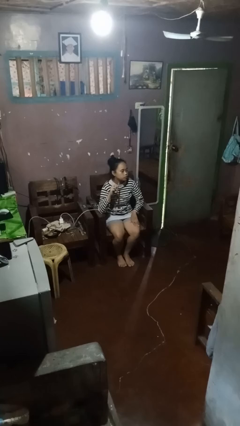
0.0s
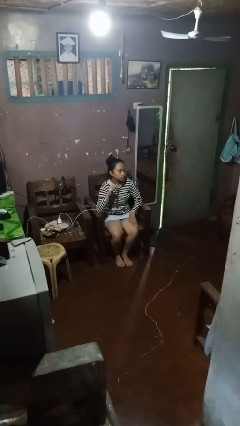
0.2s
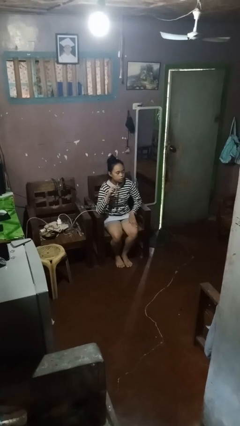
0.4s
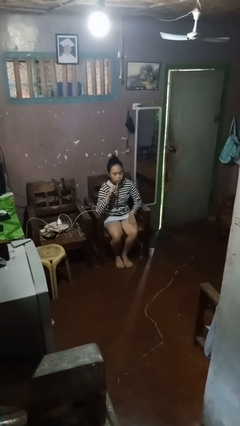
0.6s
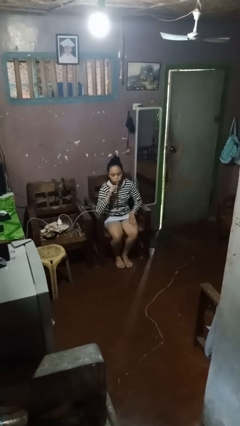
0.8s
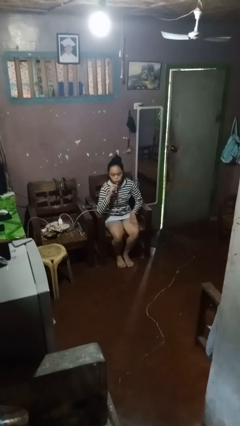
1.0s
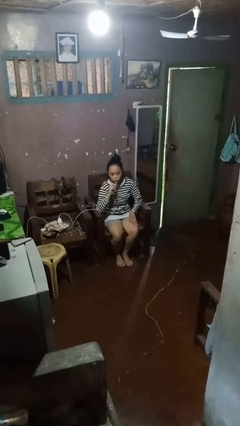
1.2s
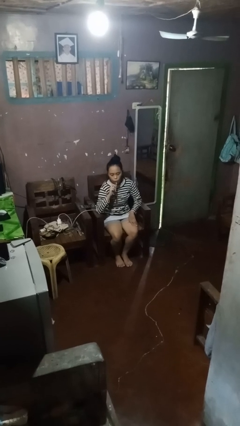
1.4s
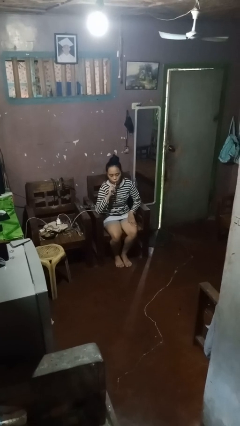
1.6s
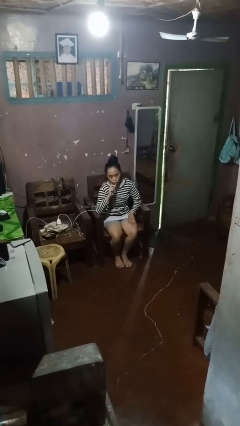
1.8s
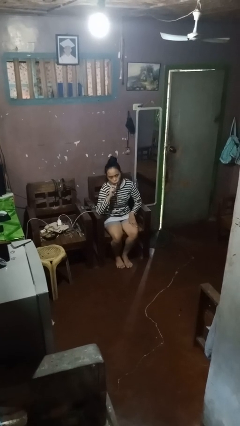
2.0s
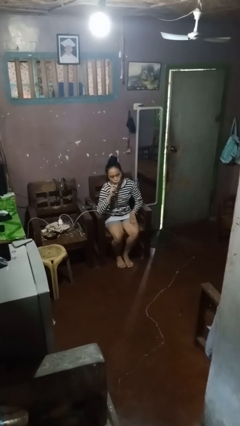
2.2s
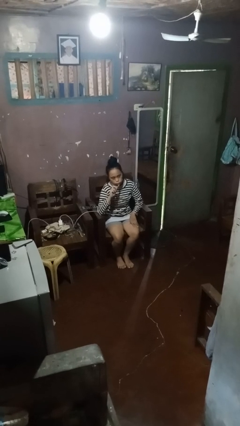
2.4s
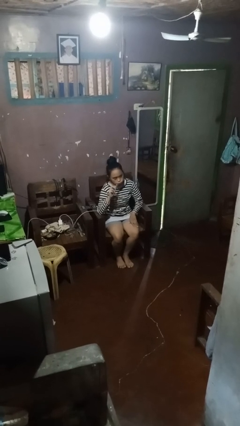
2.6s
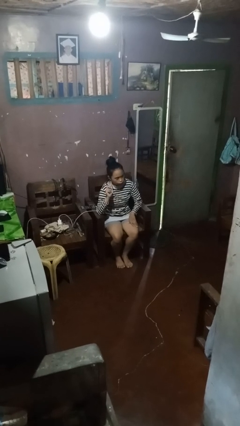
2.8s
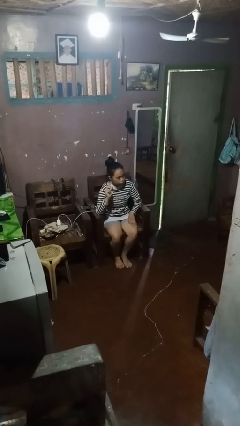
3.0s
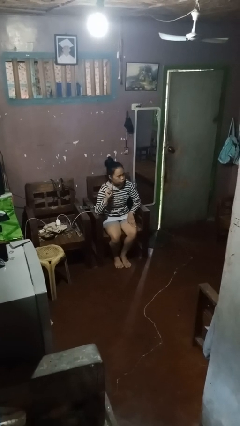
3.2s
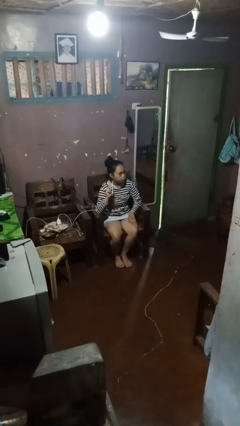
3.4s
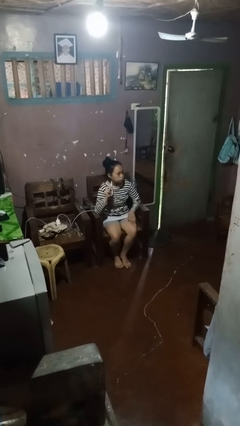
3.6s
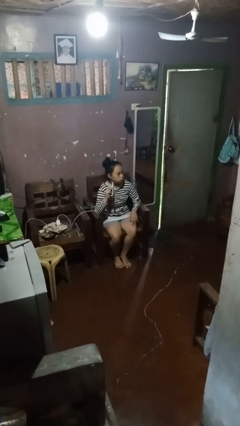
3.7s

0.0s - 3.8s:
person vapes

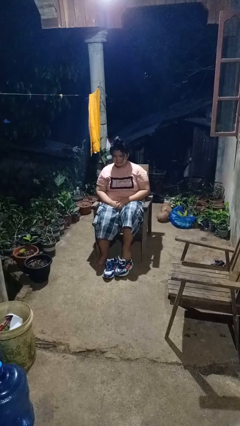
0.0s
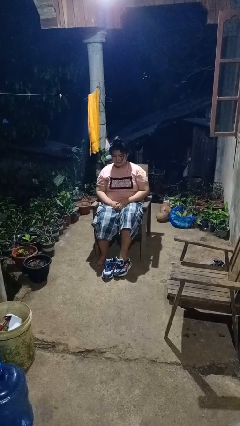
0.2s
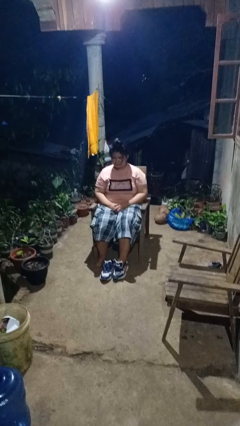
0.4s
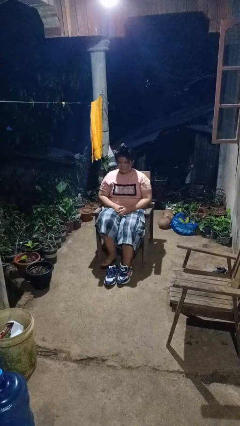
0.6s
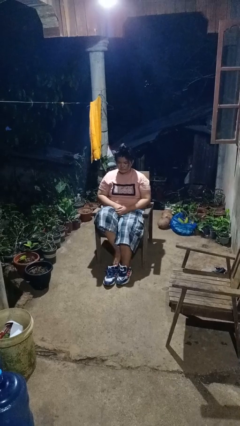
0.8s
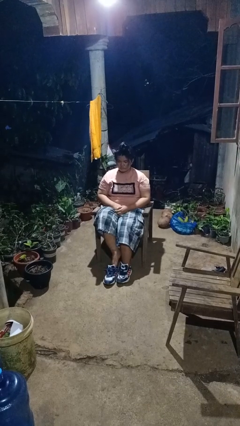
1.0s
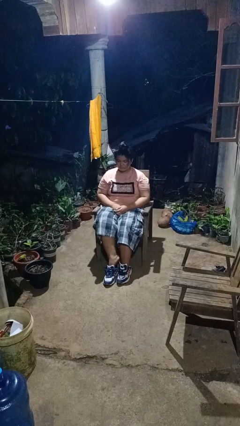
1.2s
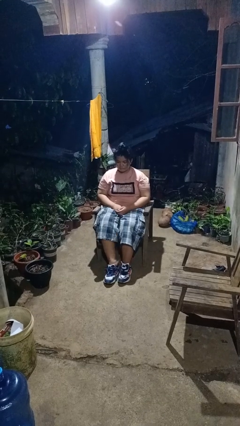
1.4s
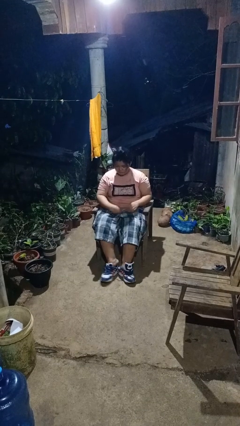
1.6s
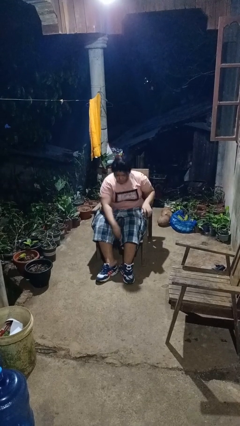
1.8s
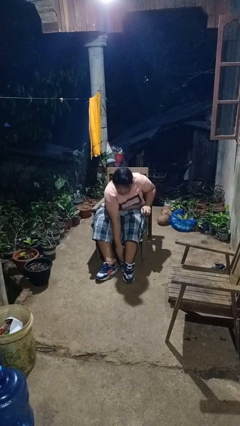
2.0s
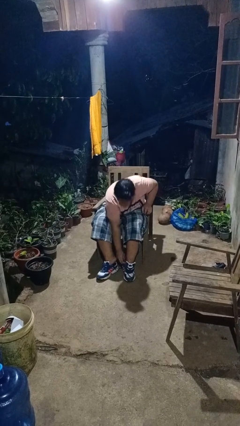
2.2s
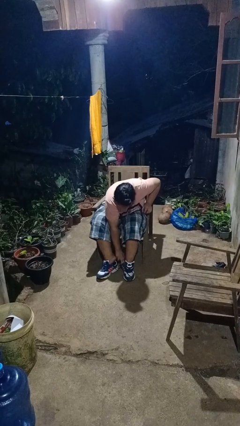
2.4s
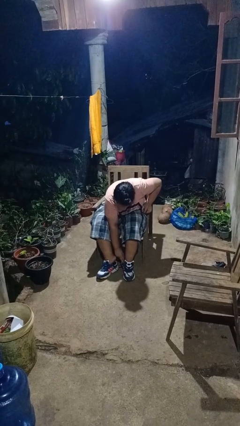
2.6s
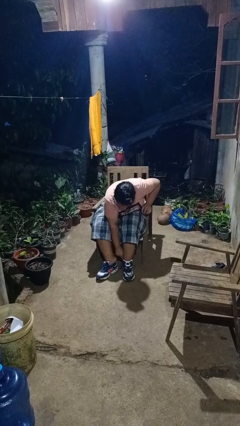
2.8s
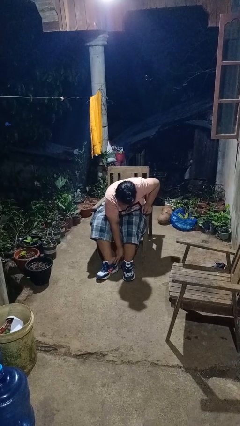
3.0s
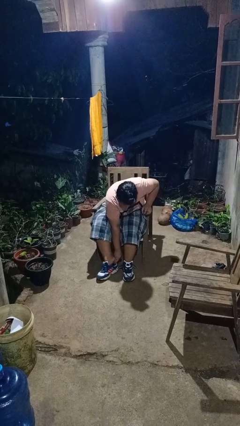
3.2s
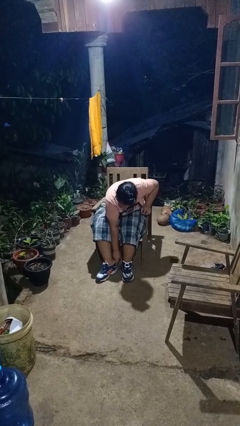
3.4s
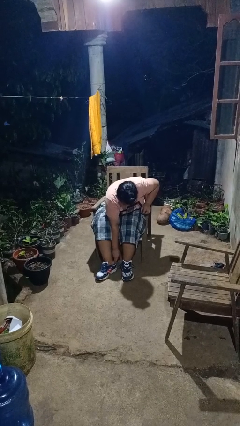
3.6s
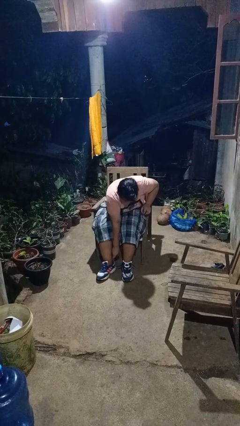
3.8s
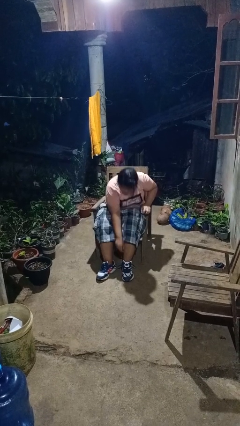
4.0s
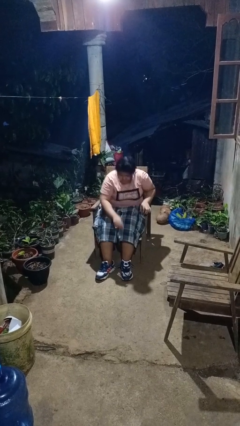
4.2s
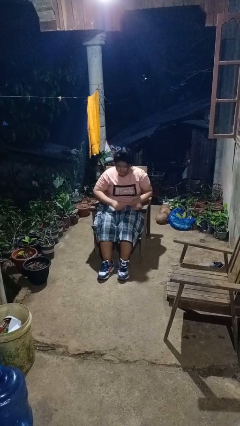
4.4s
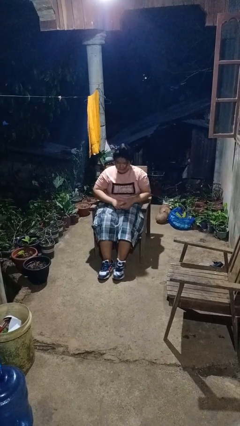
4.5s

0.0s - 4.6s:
person puts on shoes

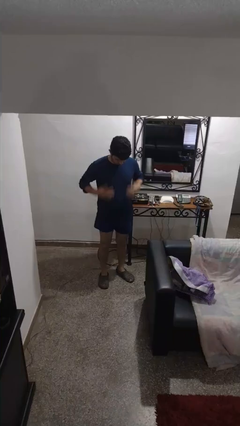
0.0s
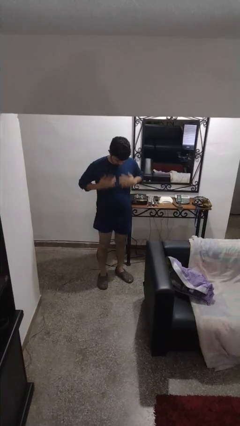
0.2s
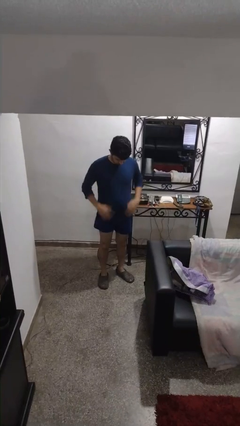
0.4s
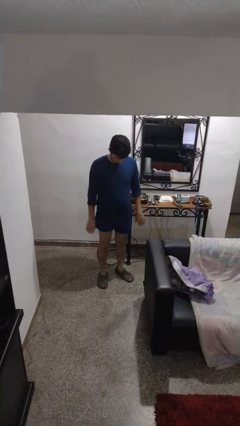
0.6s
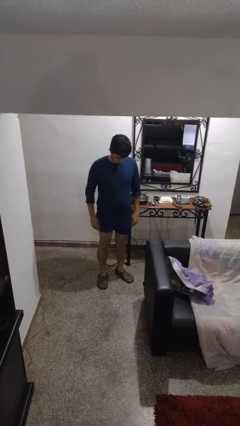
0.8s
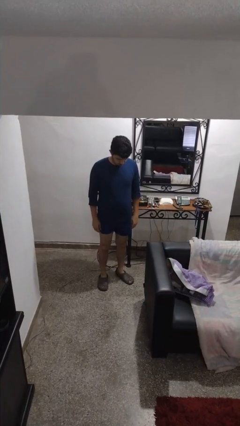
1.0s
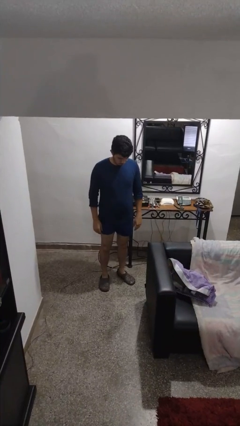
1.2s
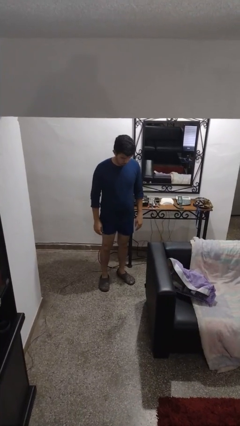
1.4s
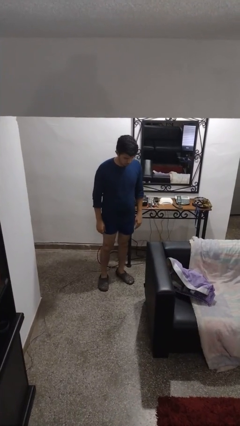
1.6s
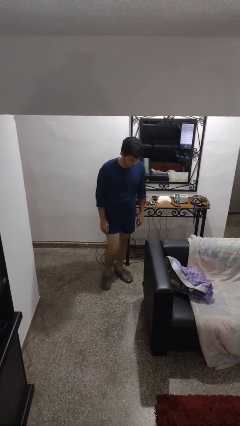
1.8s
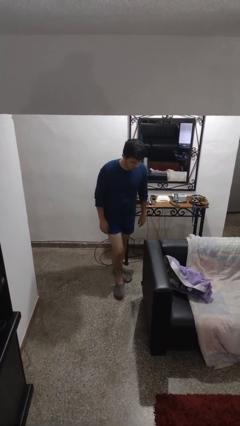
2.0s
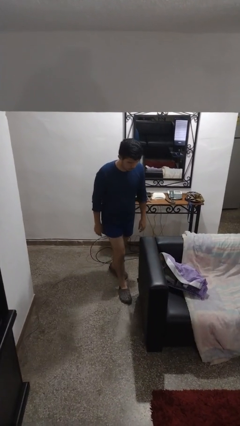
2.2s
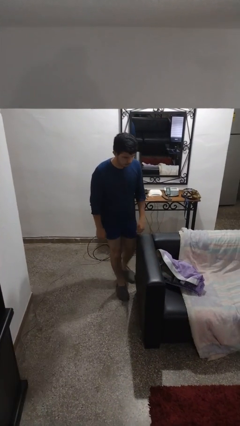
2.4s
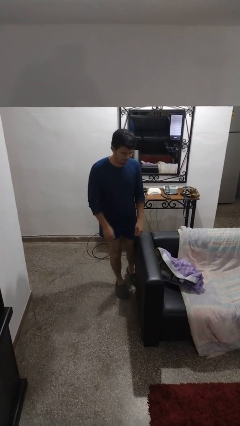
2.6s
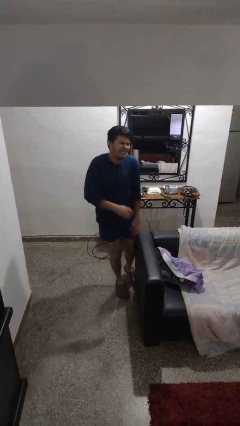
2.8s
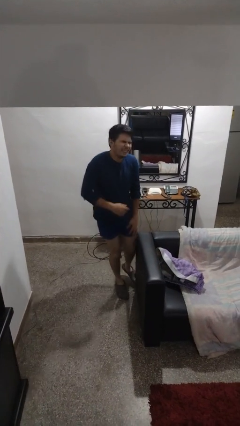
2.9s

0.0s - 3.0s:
person trips on object on floor

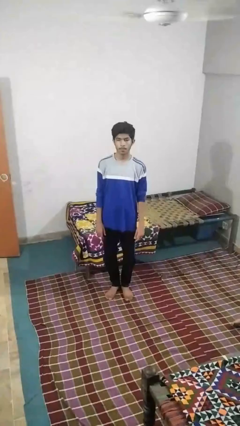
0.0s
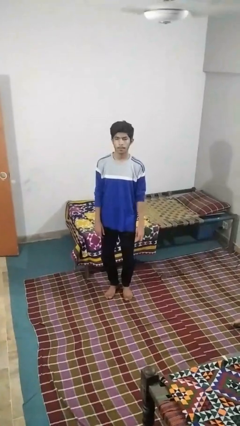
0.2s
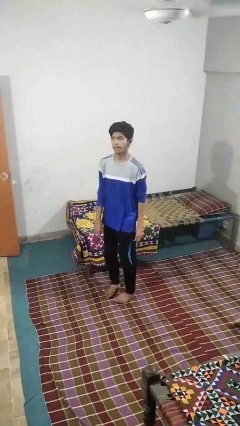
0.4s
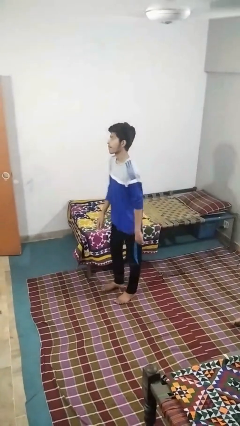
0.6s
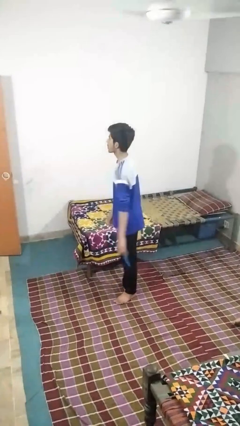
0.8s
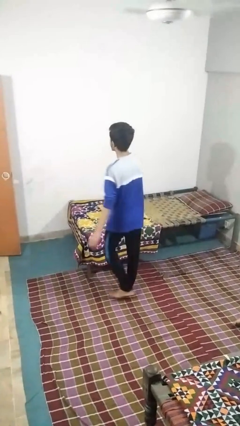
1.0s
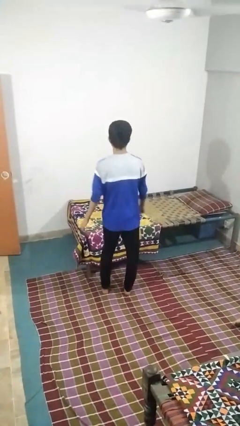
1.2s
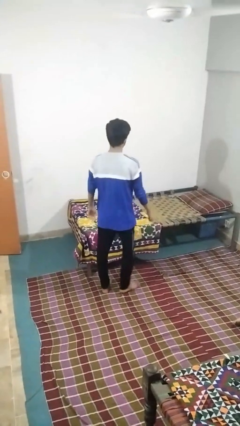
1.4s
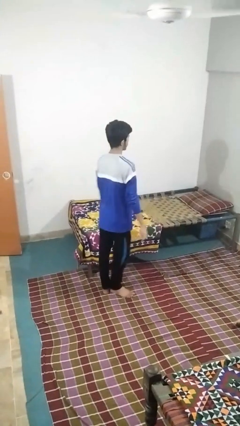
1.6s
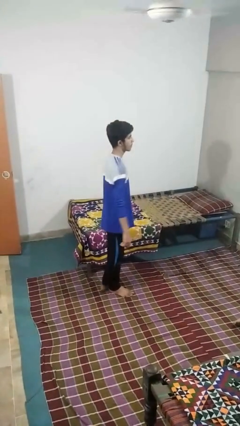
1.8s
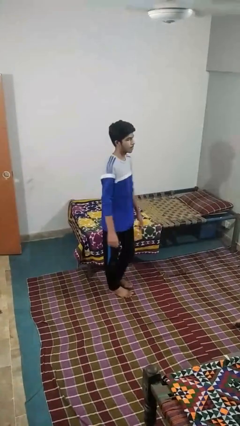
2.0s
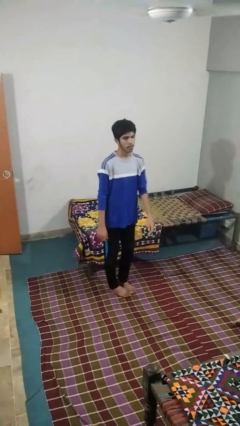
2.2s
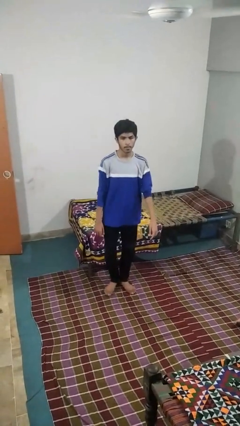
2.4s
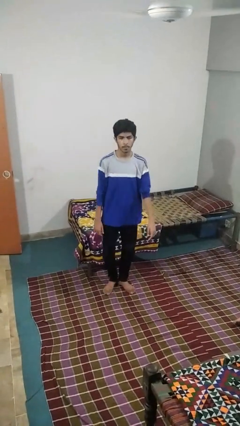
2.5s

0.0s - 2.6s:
person twirls

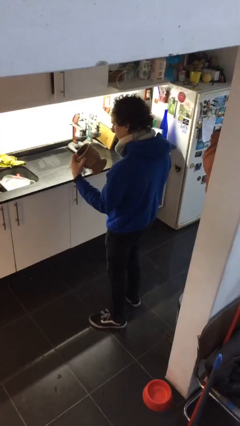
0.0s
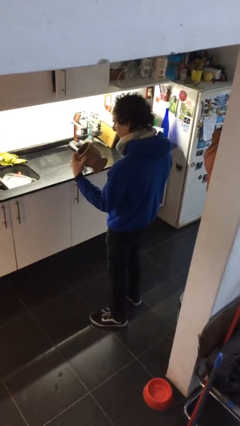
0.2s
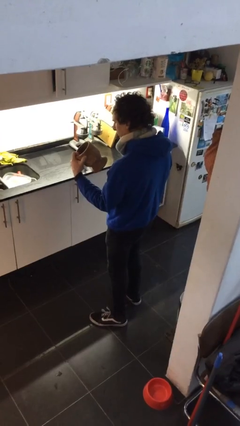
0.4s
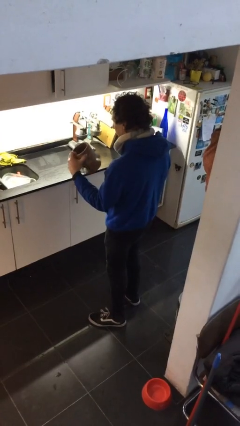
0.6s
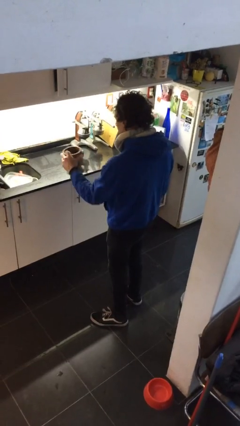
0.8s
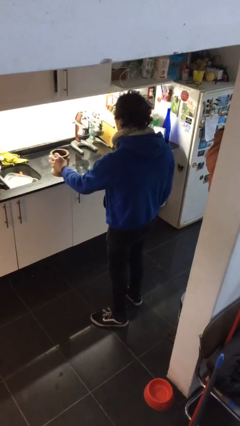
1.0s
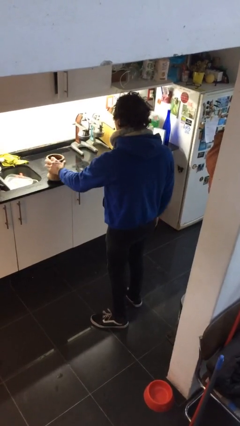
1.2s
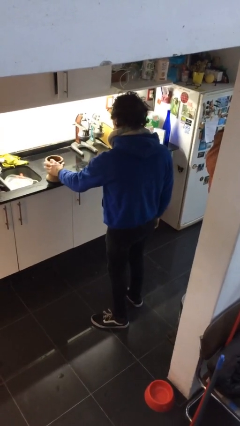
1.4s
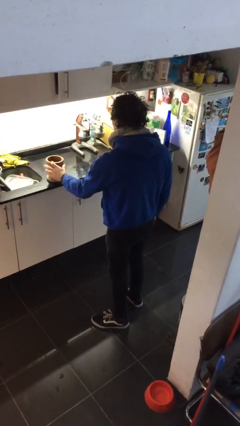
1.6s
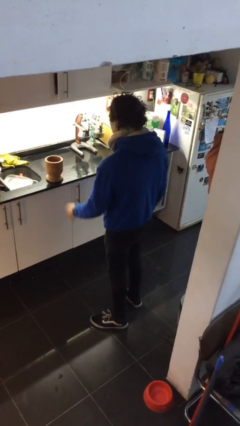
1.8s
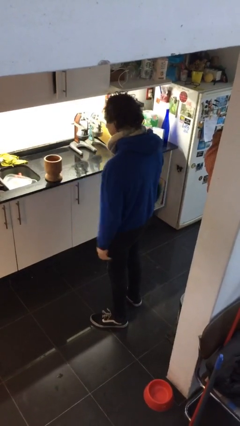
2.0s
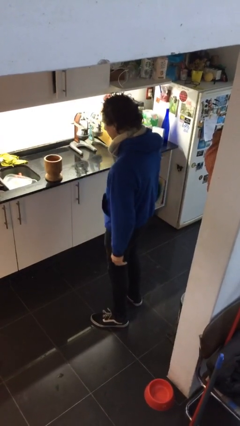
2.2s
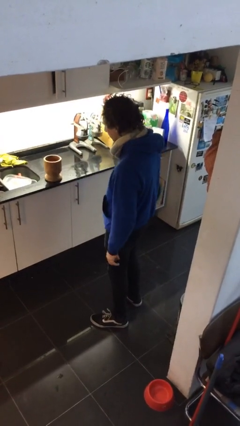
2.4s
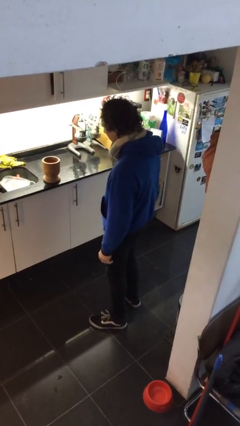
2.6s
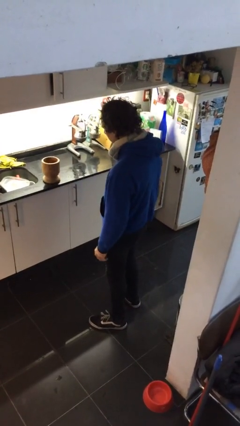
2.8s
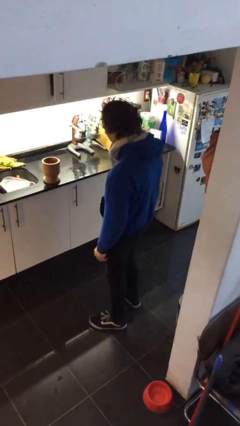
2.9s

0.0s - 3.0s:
person puts down object on countertop

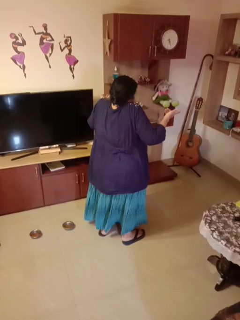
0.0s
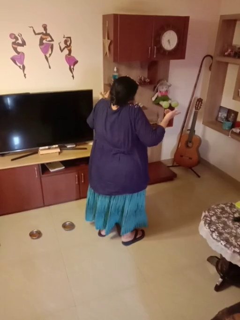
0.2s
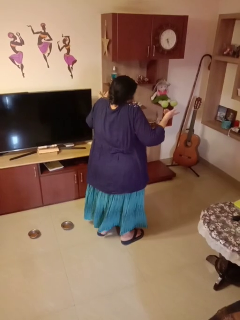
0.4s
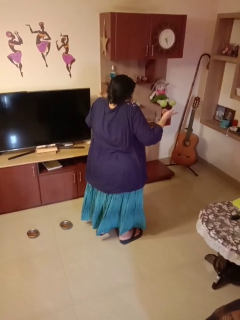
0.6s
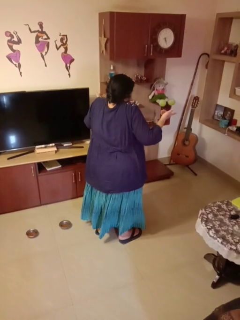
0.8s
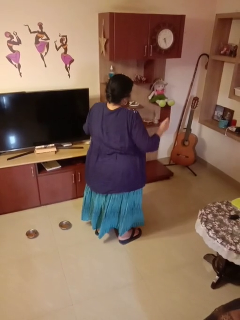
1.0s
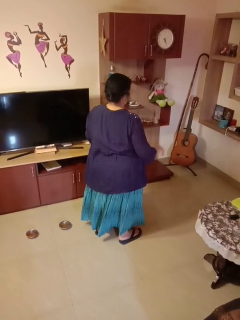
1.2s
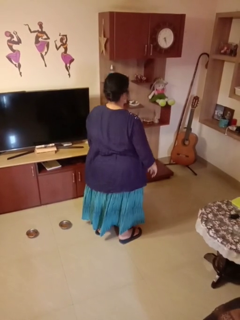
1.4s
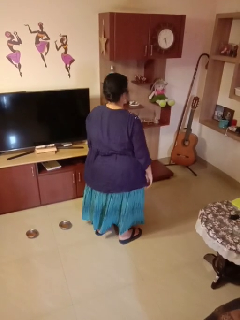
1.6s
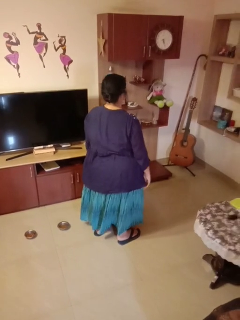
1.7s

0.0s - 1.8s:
person shrugs
